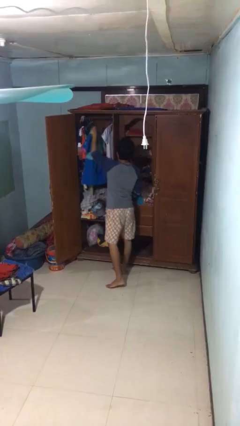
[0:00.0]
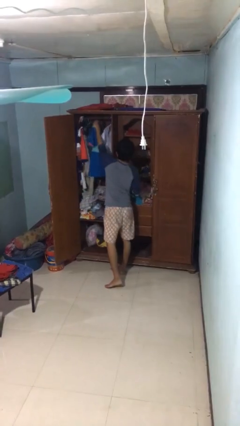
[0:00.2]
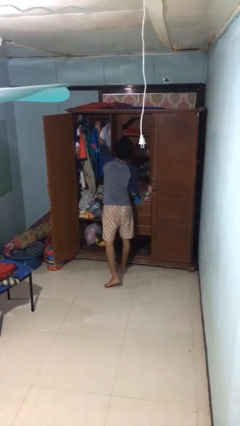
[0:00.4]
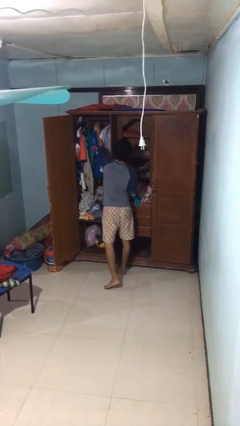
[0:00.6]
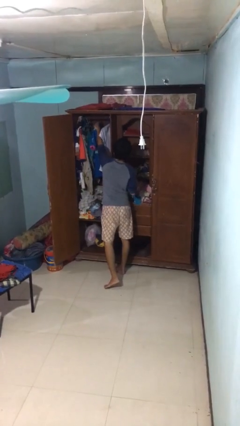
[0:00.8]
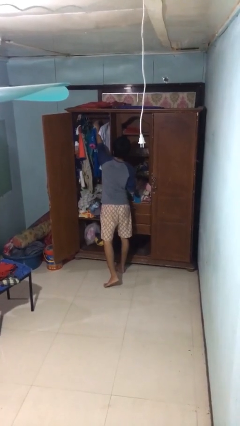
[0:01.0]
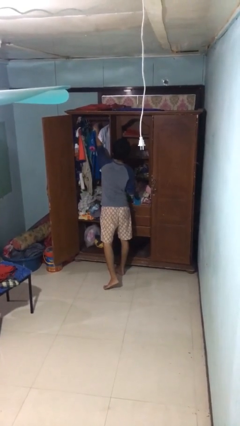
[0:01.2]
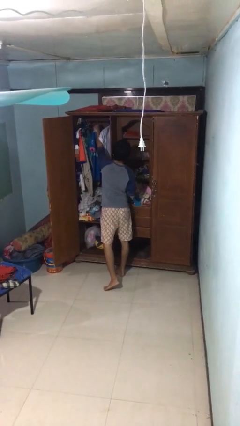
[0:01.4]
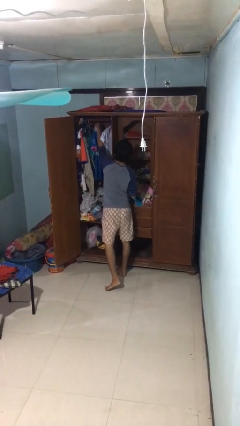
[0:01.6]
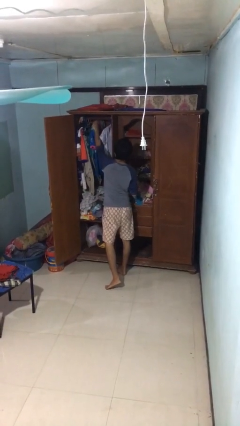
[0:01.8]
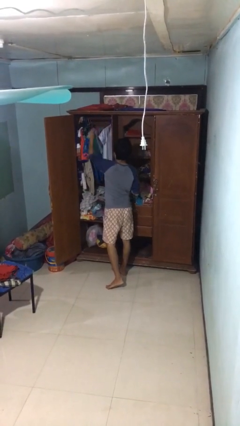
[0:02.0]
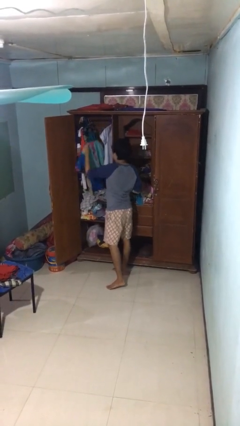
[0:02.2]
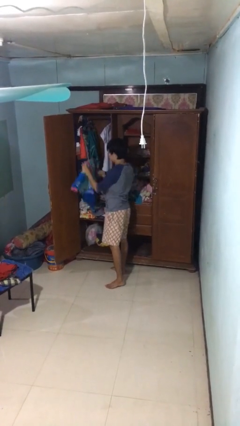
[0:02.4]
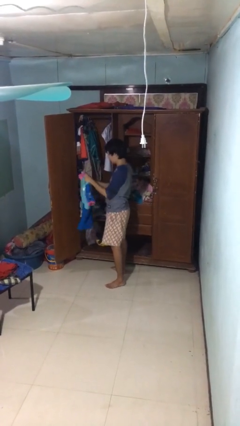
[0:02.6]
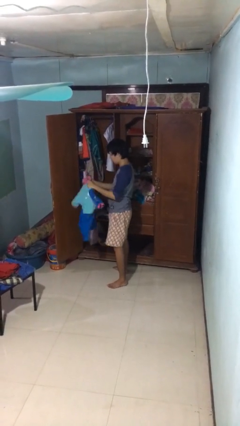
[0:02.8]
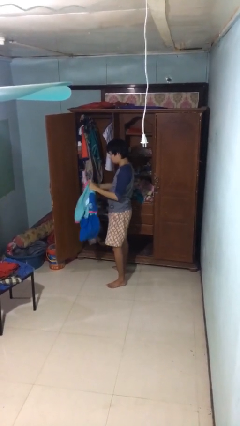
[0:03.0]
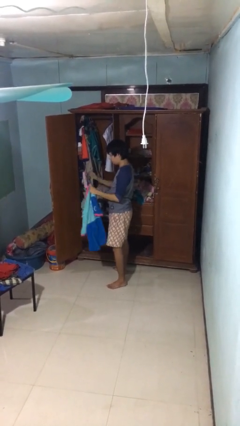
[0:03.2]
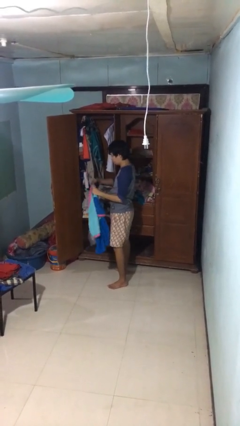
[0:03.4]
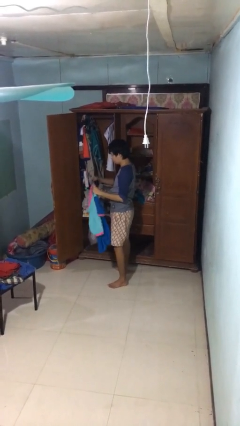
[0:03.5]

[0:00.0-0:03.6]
person takes clothes from closet

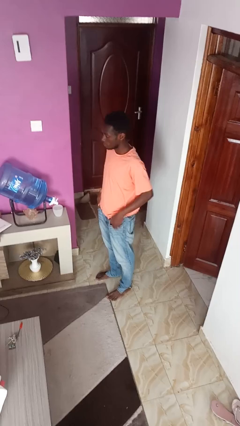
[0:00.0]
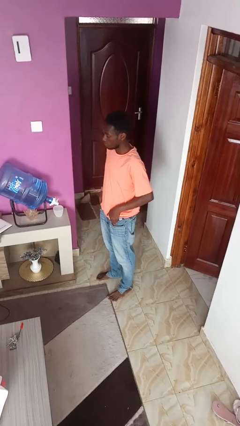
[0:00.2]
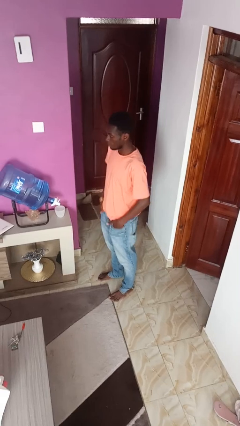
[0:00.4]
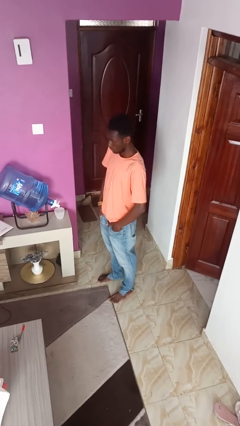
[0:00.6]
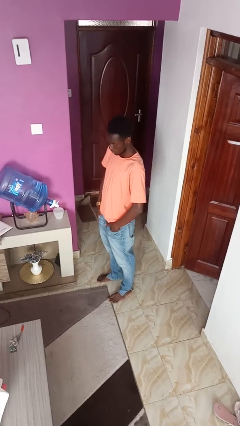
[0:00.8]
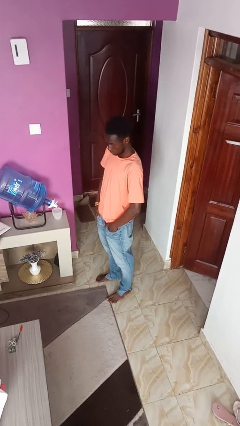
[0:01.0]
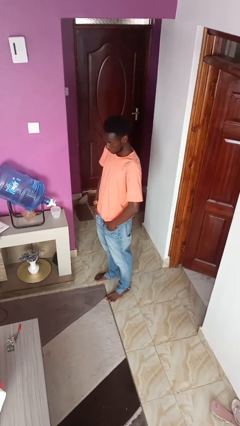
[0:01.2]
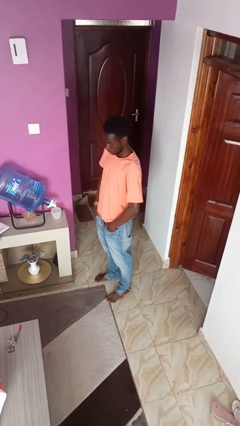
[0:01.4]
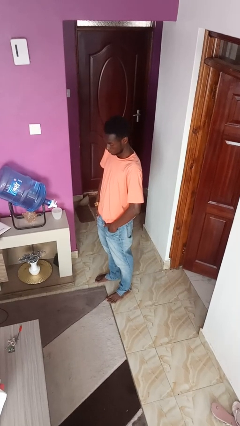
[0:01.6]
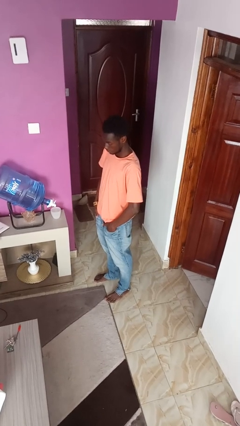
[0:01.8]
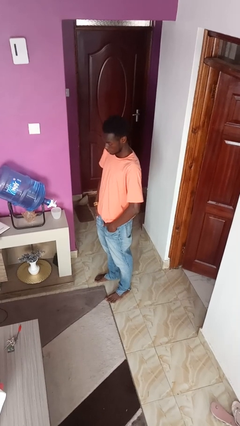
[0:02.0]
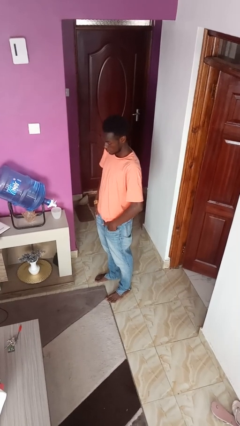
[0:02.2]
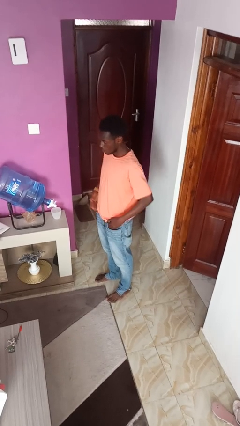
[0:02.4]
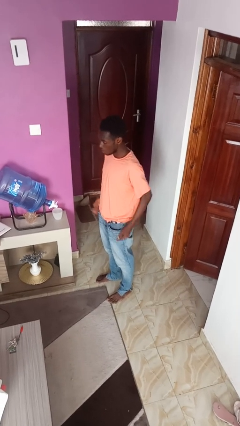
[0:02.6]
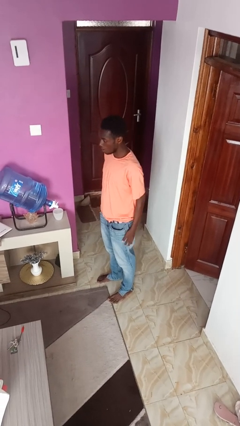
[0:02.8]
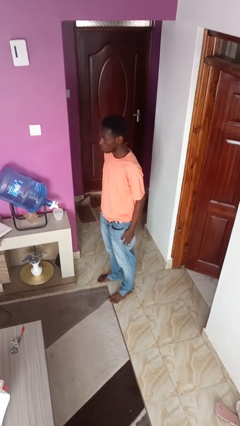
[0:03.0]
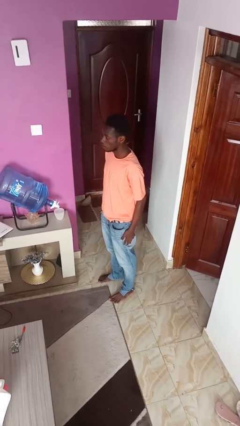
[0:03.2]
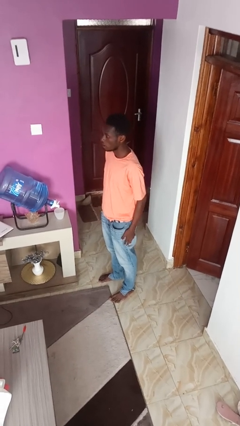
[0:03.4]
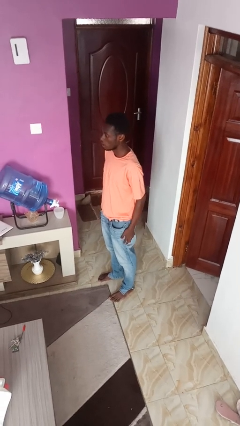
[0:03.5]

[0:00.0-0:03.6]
person puts hands in back pockets

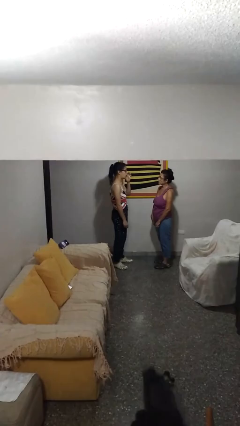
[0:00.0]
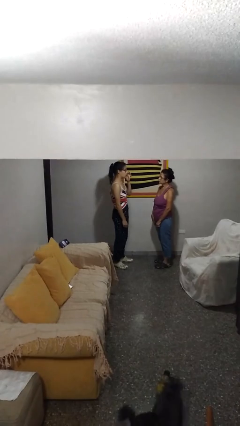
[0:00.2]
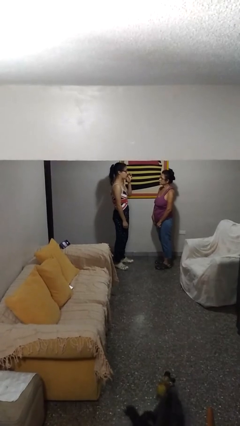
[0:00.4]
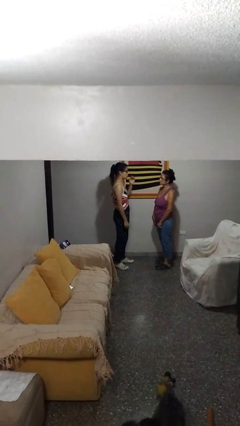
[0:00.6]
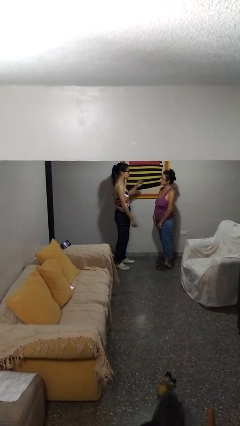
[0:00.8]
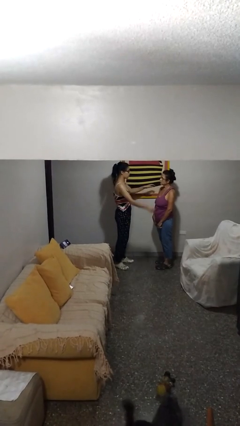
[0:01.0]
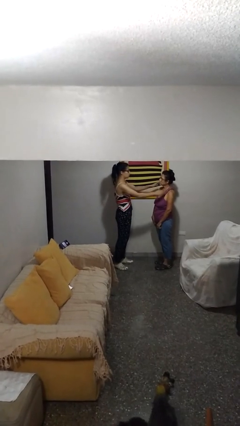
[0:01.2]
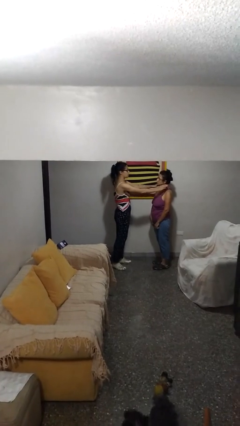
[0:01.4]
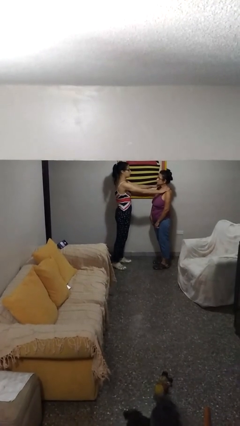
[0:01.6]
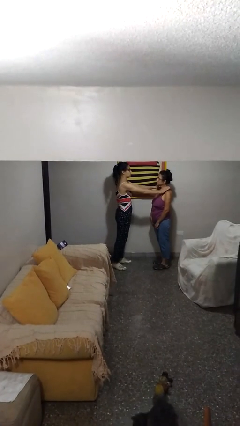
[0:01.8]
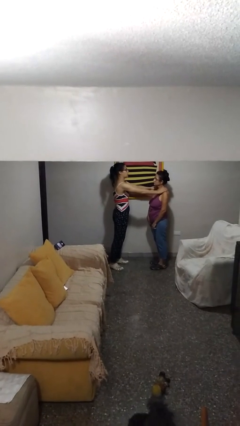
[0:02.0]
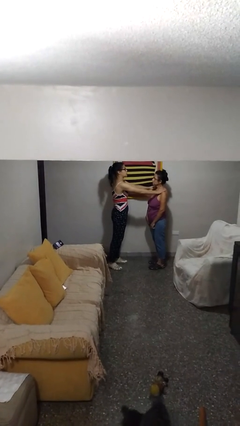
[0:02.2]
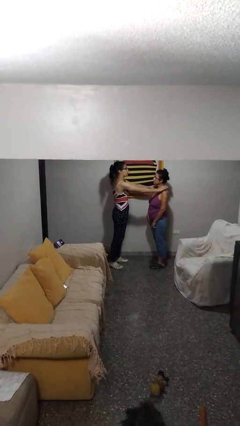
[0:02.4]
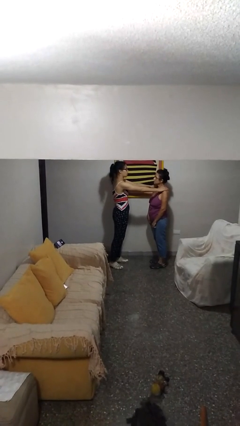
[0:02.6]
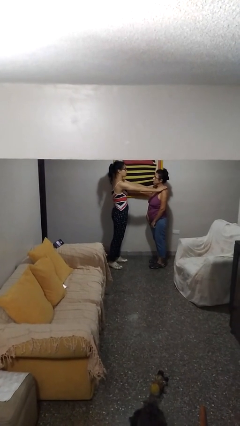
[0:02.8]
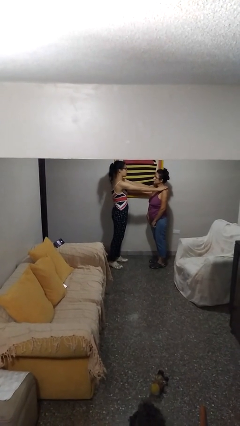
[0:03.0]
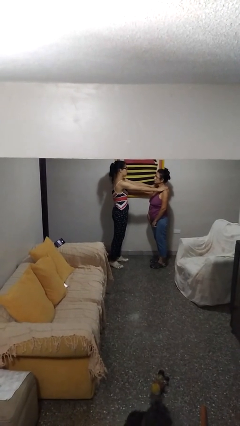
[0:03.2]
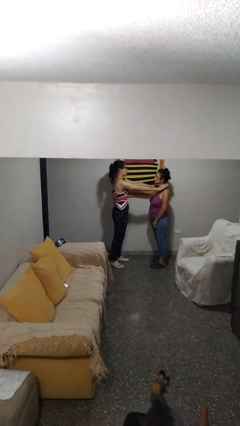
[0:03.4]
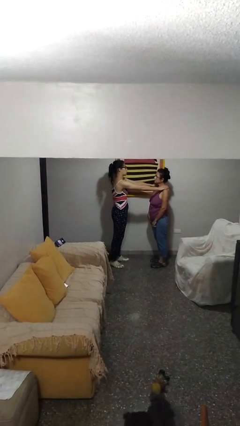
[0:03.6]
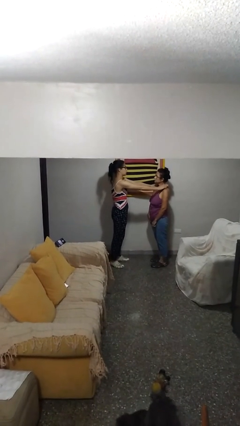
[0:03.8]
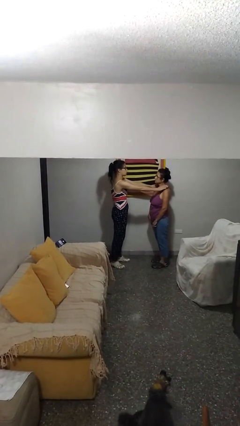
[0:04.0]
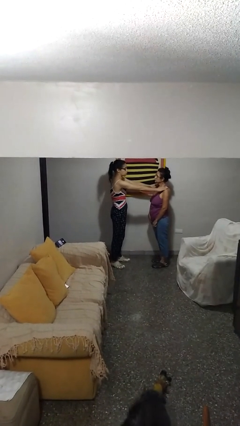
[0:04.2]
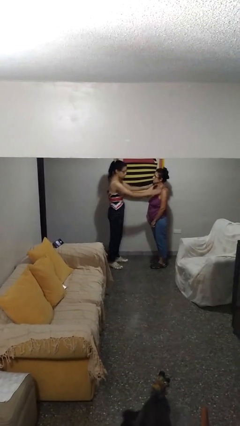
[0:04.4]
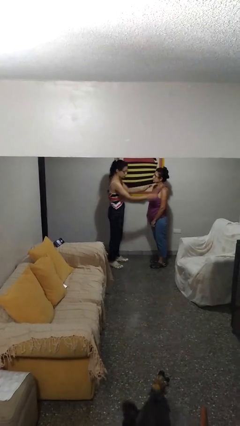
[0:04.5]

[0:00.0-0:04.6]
person pounds shoulders of person

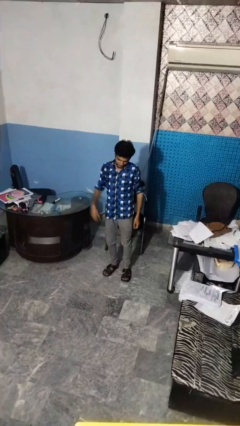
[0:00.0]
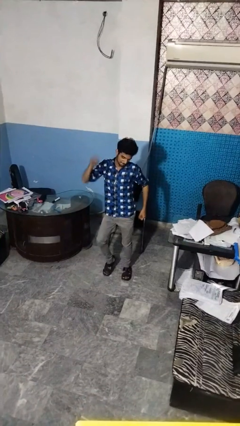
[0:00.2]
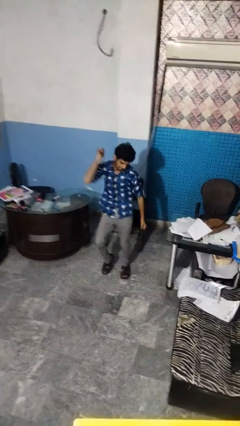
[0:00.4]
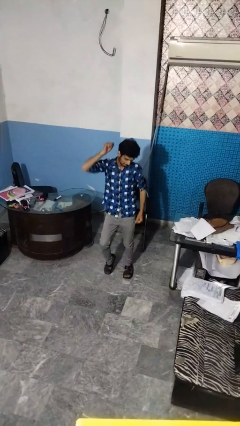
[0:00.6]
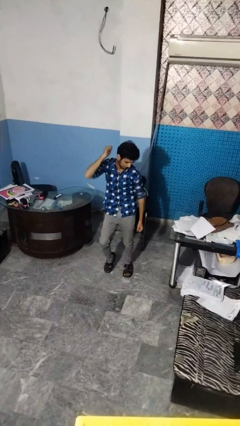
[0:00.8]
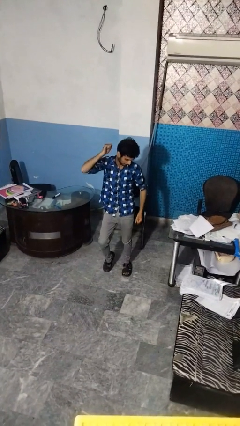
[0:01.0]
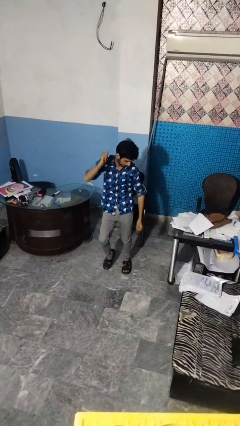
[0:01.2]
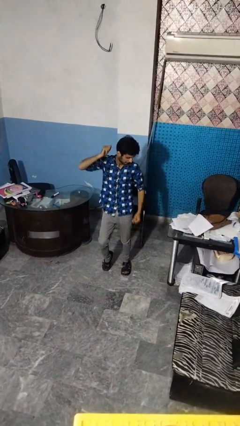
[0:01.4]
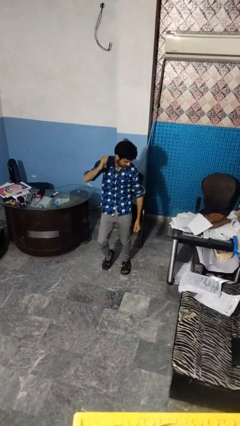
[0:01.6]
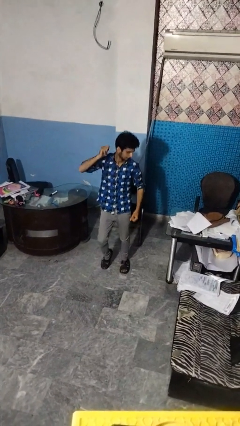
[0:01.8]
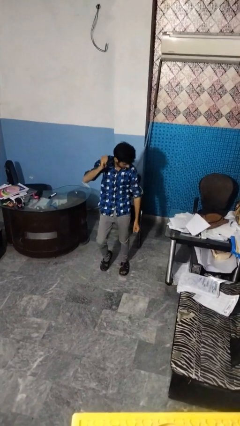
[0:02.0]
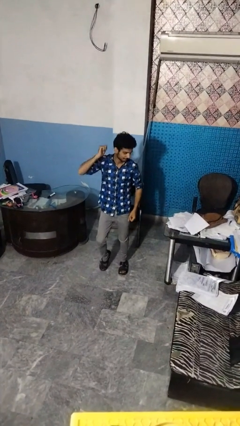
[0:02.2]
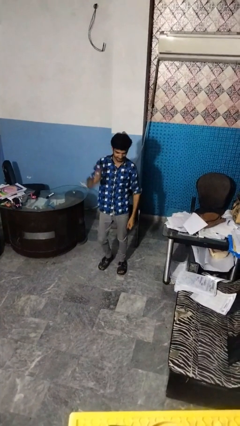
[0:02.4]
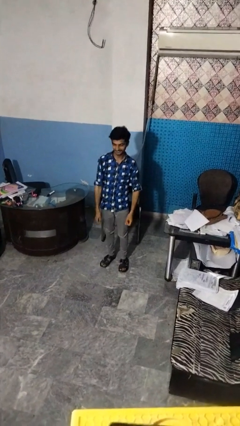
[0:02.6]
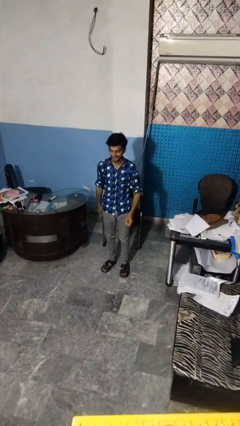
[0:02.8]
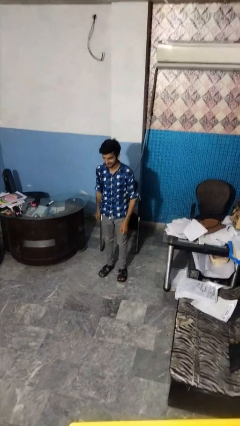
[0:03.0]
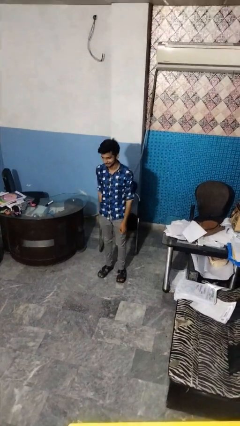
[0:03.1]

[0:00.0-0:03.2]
person dances in place

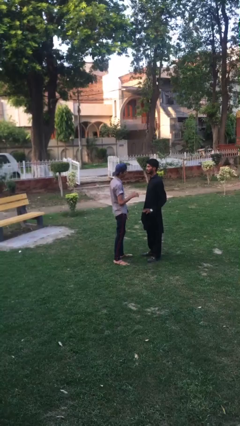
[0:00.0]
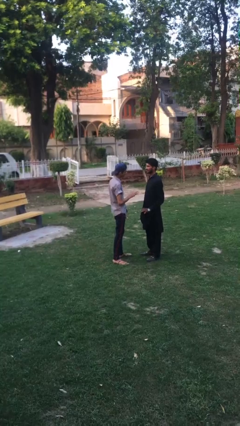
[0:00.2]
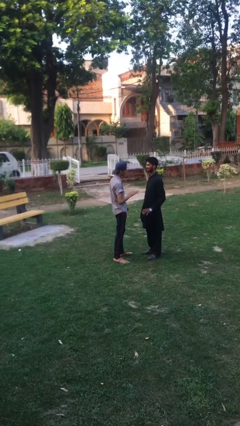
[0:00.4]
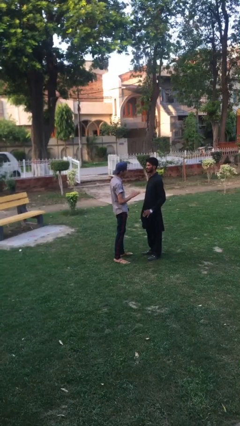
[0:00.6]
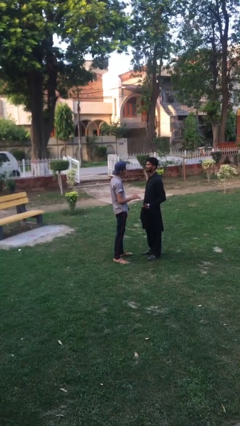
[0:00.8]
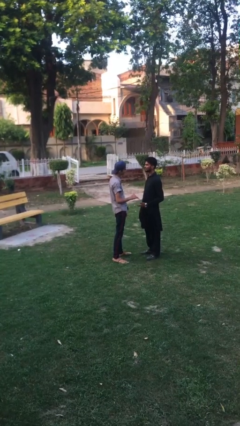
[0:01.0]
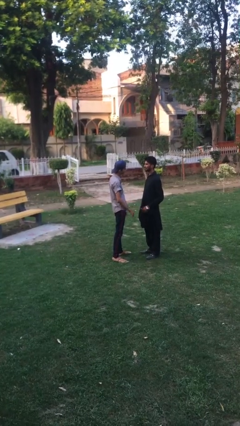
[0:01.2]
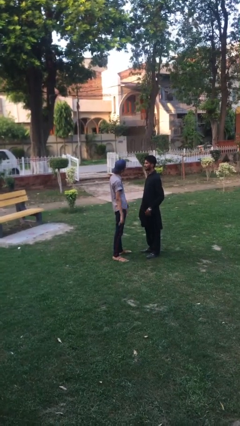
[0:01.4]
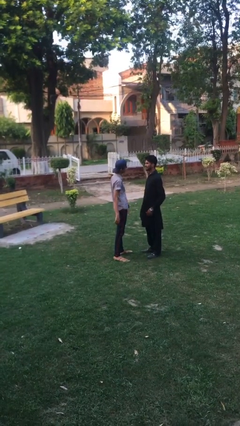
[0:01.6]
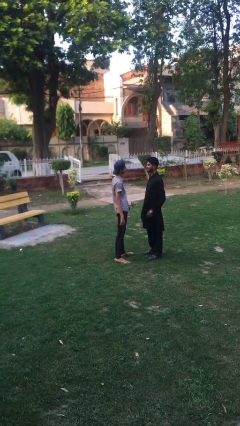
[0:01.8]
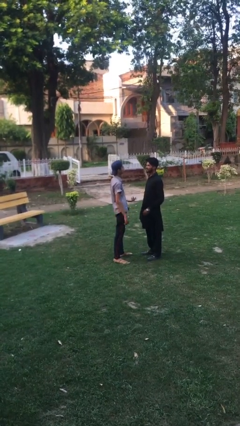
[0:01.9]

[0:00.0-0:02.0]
person talks to person

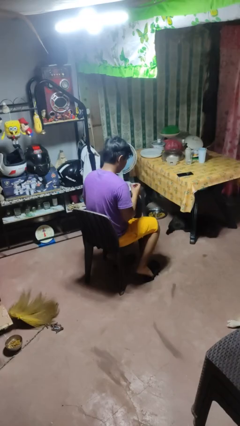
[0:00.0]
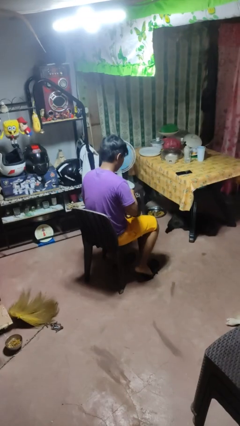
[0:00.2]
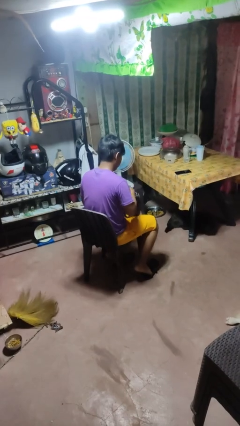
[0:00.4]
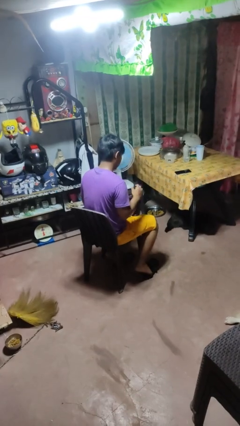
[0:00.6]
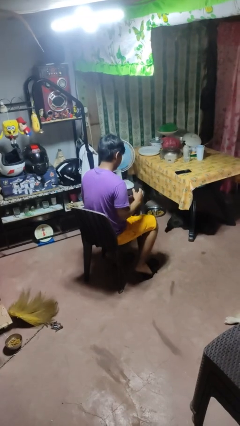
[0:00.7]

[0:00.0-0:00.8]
person puts object into purse
